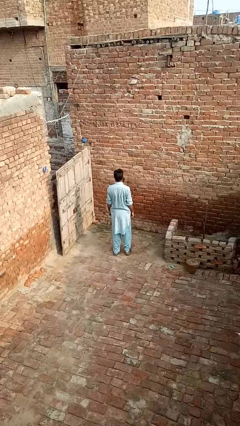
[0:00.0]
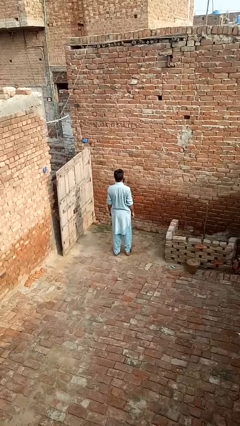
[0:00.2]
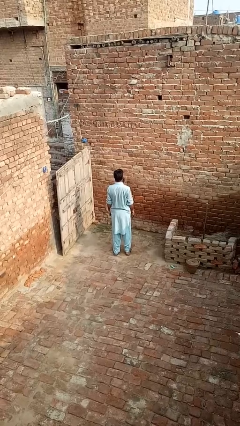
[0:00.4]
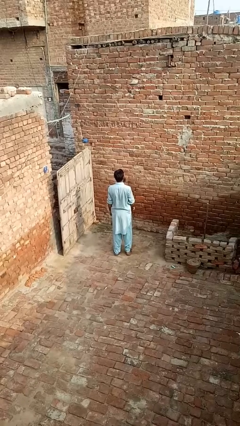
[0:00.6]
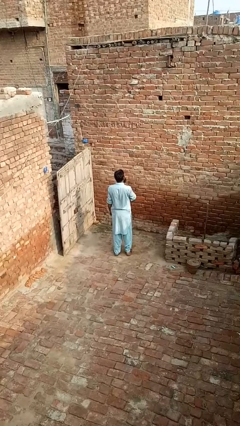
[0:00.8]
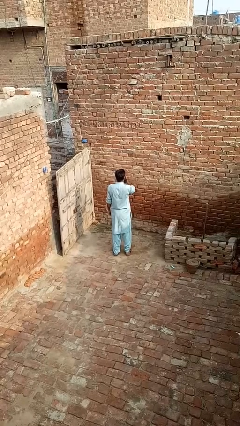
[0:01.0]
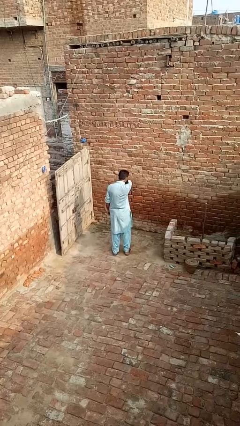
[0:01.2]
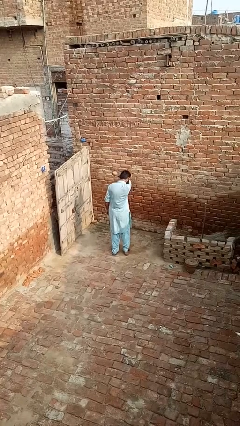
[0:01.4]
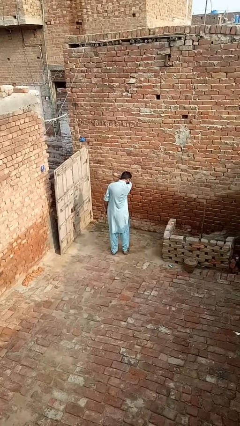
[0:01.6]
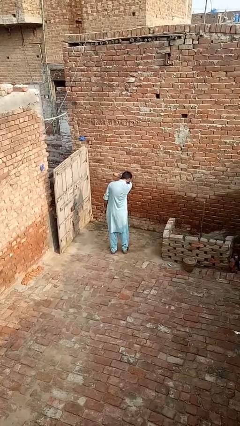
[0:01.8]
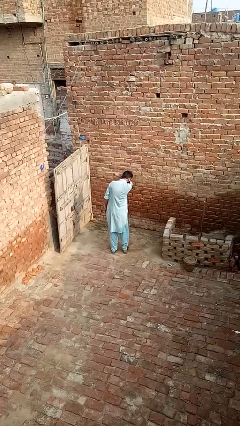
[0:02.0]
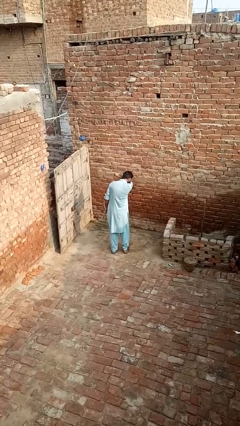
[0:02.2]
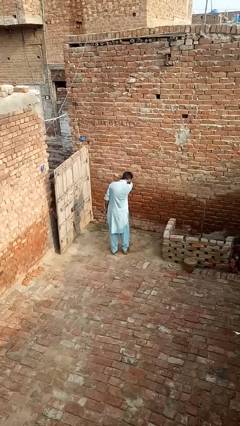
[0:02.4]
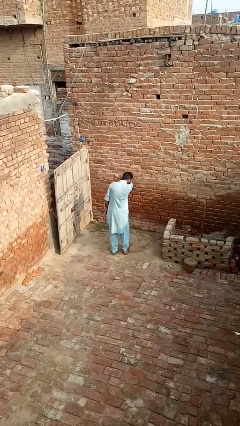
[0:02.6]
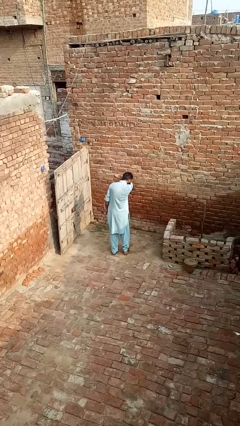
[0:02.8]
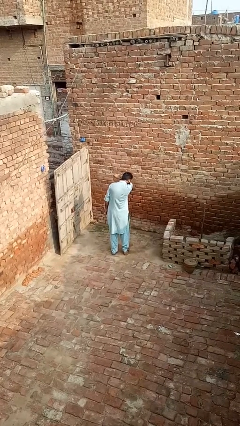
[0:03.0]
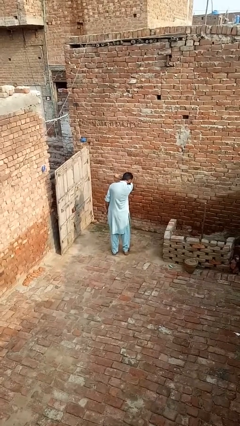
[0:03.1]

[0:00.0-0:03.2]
person sneezes into arm

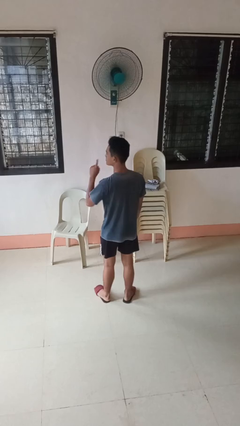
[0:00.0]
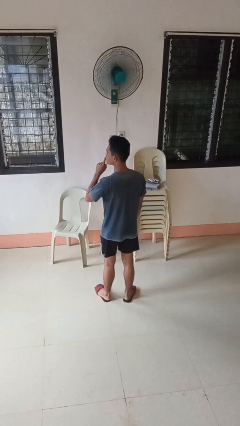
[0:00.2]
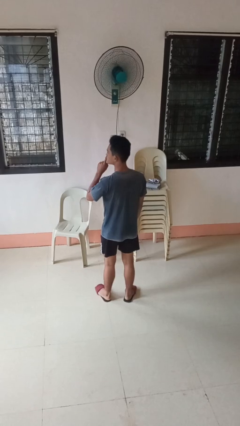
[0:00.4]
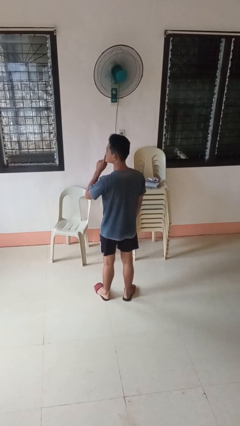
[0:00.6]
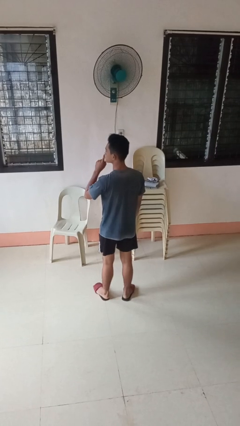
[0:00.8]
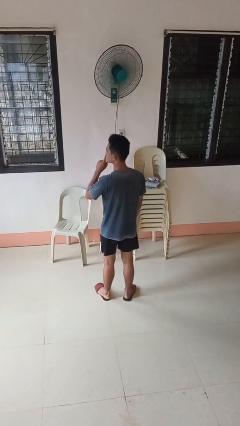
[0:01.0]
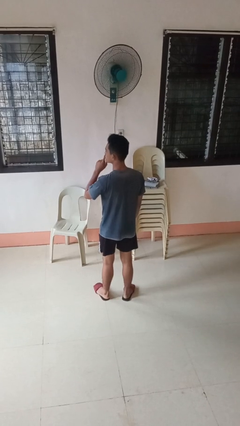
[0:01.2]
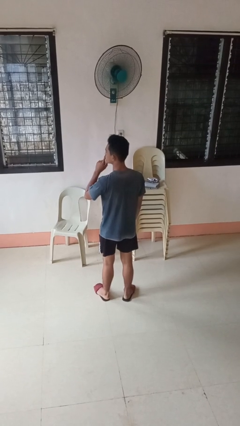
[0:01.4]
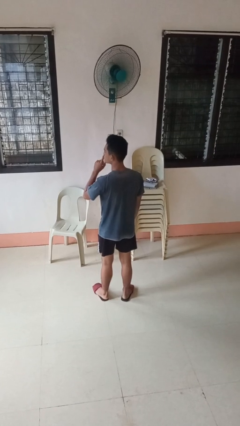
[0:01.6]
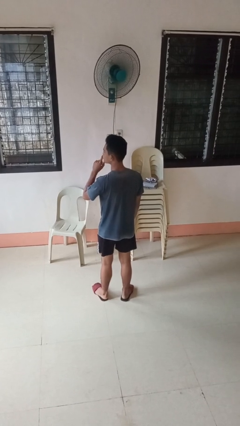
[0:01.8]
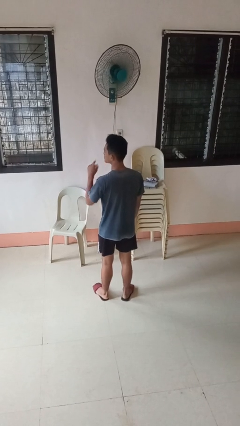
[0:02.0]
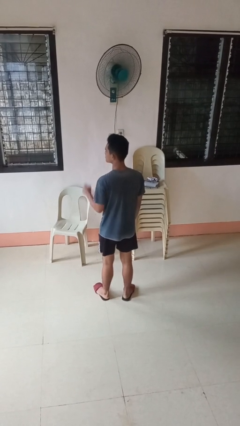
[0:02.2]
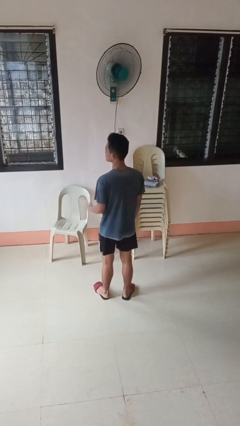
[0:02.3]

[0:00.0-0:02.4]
person gestures be quiet

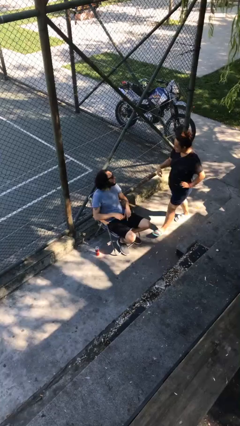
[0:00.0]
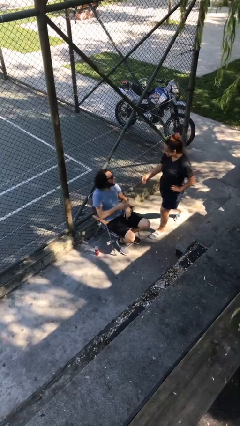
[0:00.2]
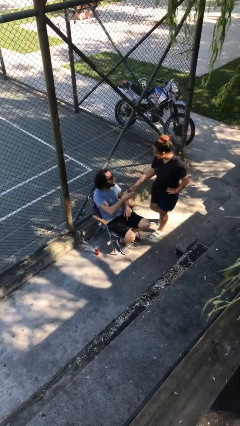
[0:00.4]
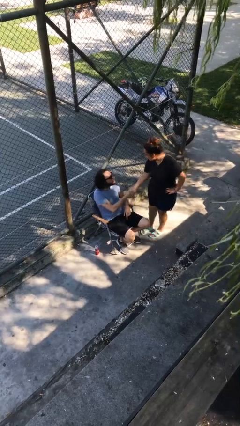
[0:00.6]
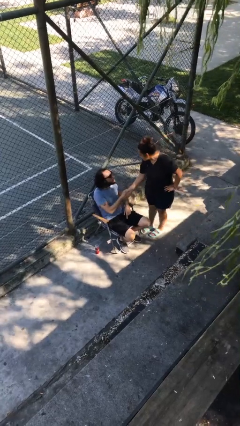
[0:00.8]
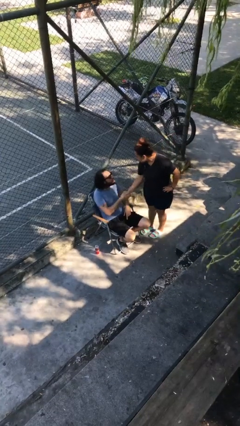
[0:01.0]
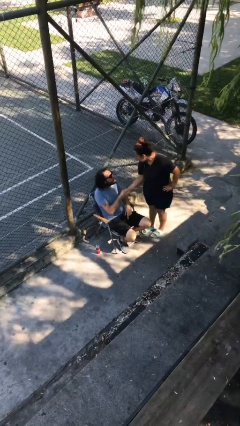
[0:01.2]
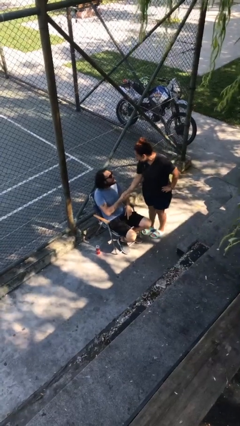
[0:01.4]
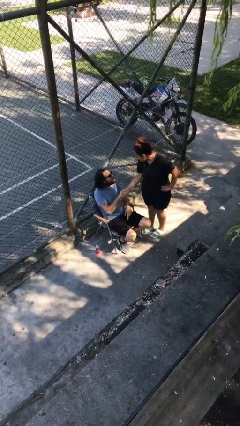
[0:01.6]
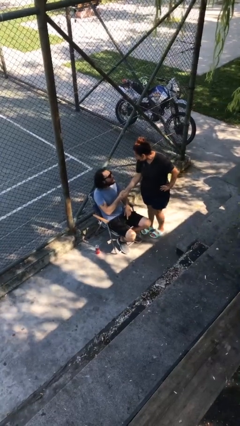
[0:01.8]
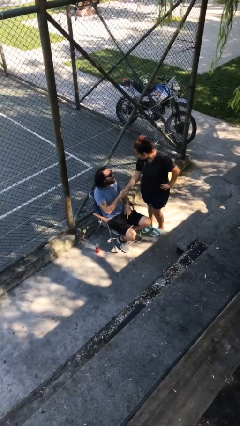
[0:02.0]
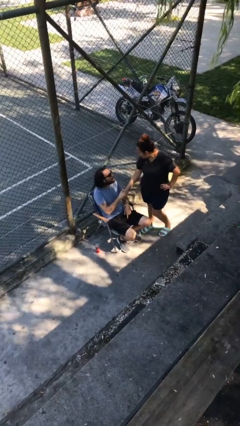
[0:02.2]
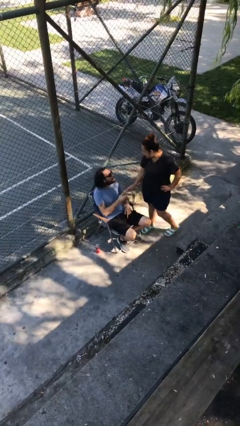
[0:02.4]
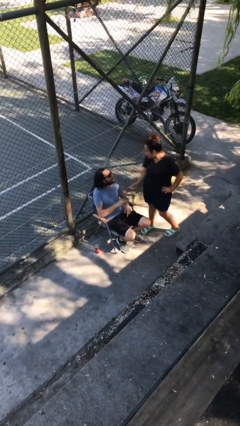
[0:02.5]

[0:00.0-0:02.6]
person shakes hand

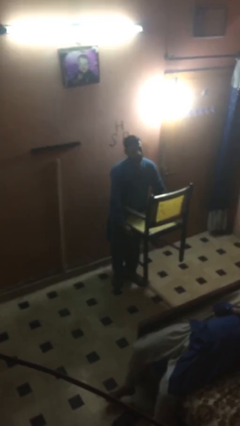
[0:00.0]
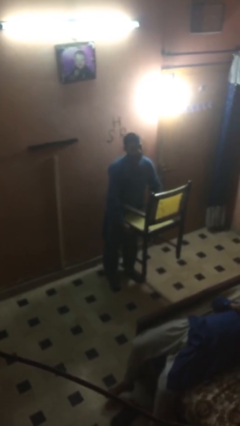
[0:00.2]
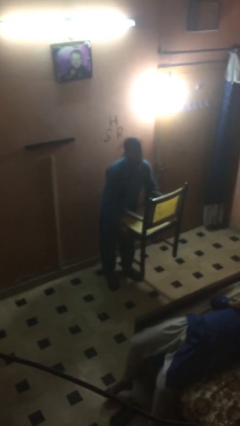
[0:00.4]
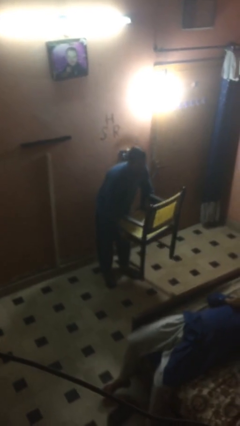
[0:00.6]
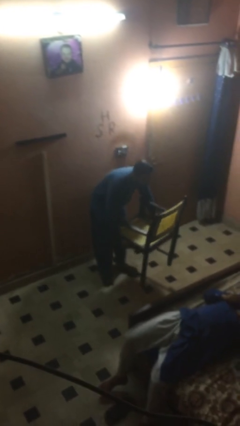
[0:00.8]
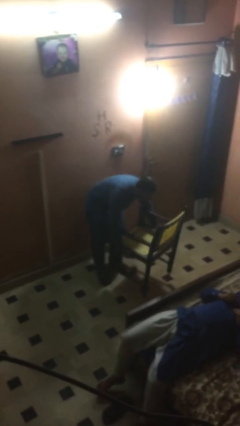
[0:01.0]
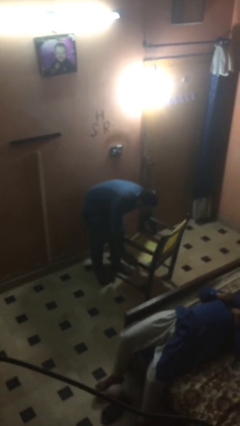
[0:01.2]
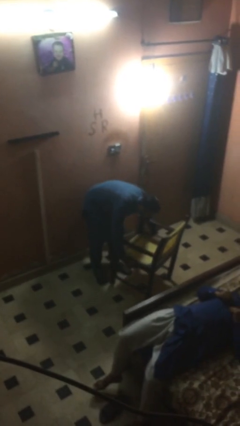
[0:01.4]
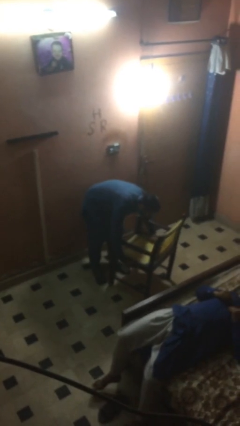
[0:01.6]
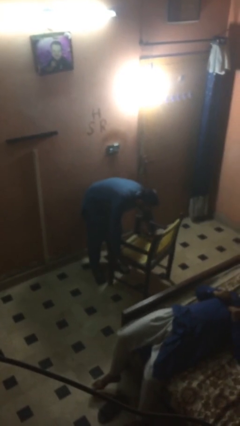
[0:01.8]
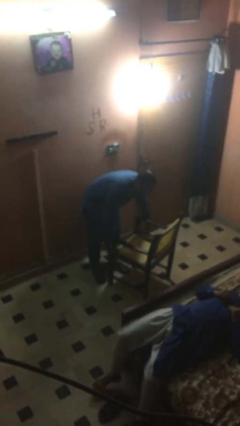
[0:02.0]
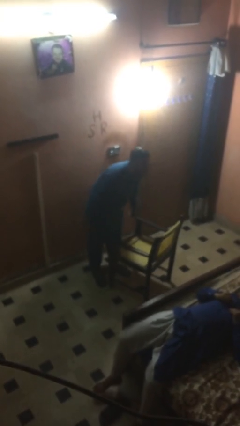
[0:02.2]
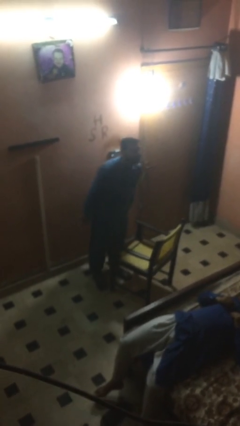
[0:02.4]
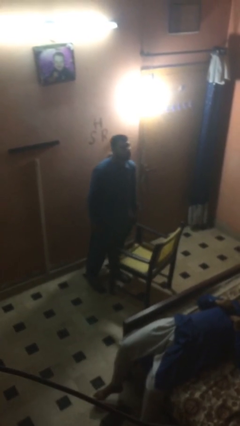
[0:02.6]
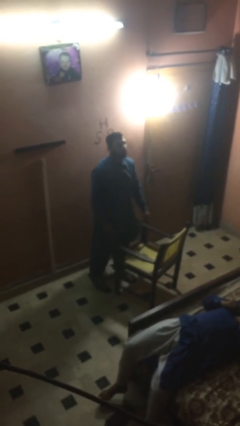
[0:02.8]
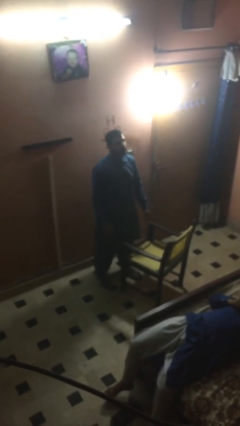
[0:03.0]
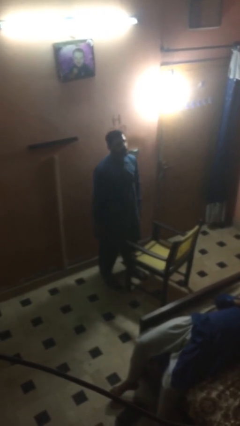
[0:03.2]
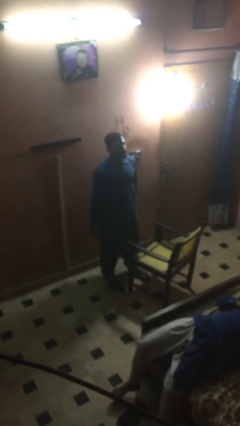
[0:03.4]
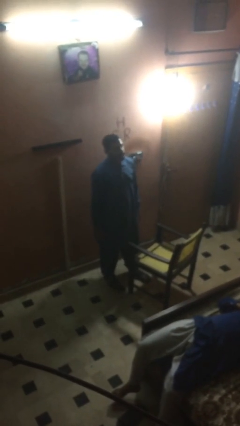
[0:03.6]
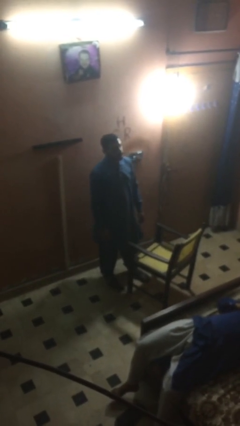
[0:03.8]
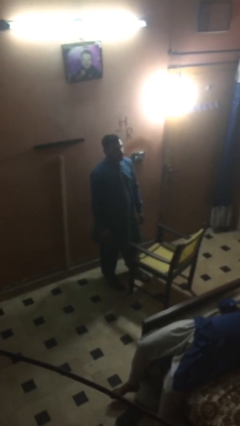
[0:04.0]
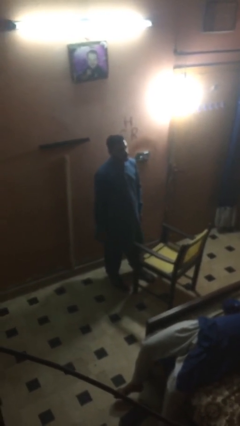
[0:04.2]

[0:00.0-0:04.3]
person puts down object on floor

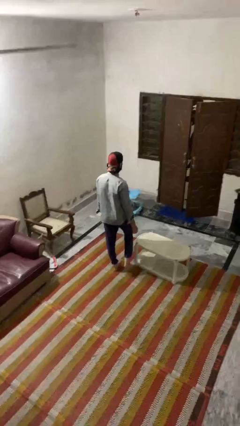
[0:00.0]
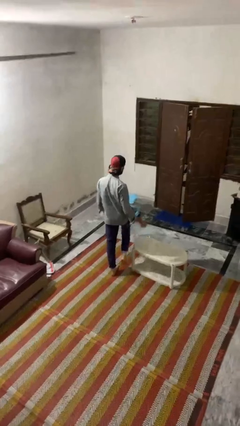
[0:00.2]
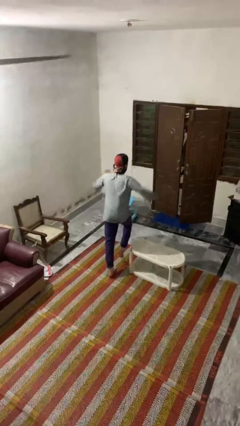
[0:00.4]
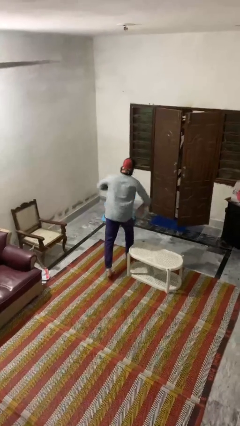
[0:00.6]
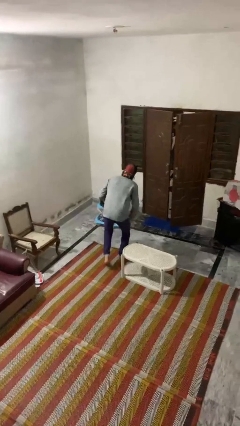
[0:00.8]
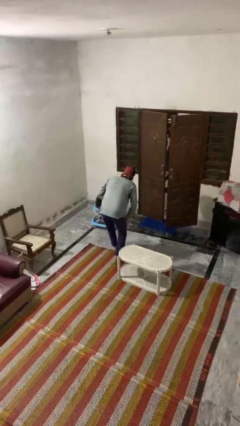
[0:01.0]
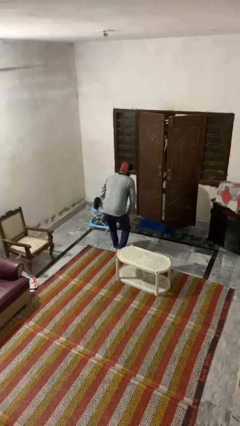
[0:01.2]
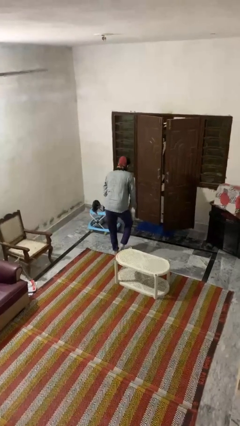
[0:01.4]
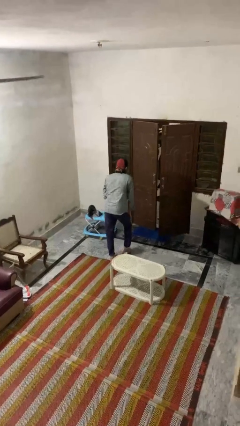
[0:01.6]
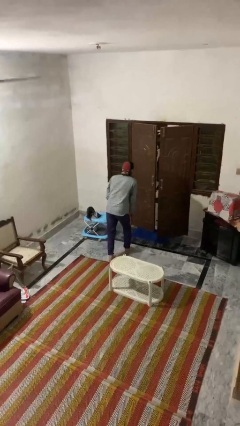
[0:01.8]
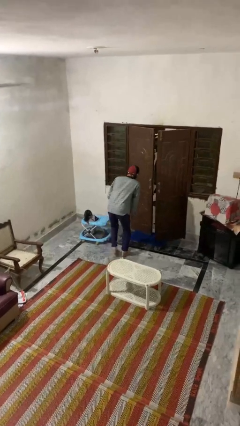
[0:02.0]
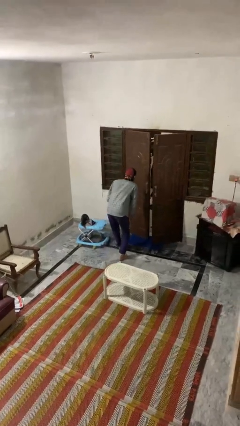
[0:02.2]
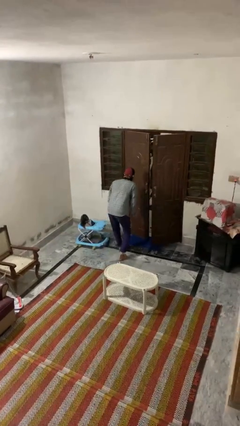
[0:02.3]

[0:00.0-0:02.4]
person bumps into table

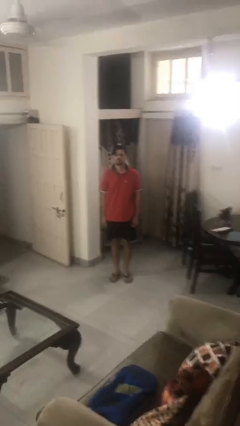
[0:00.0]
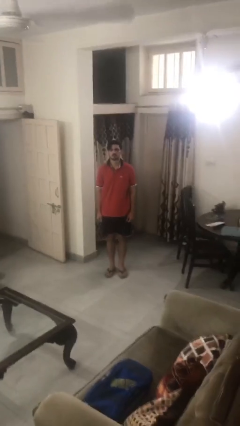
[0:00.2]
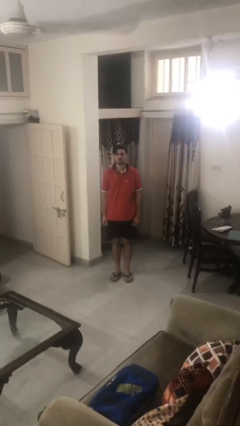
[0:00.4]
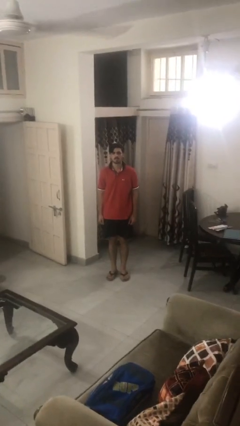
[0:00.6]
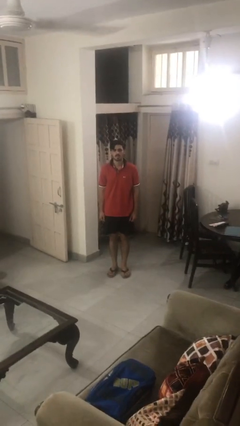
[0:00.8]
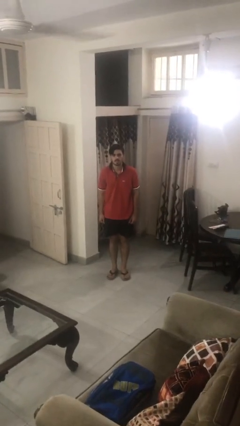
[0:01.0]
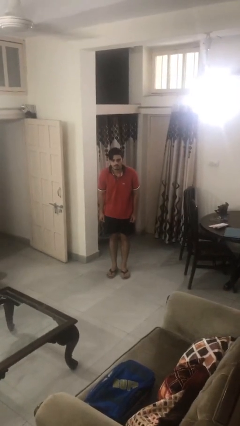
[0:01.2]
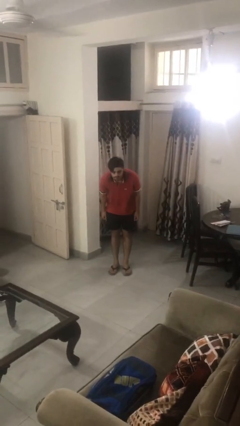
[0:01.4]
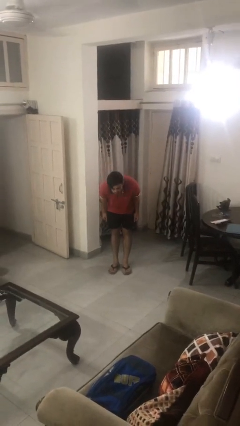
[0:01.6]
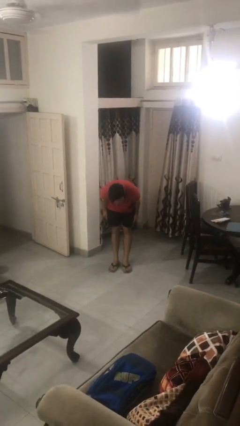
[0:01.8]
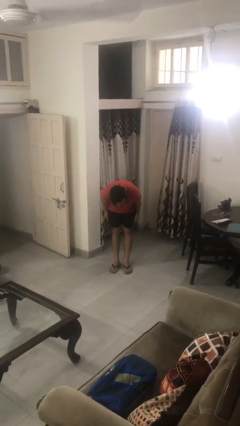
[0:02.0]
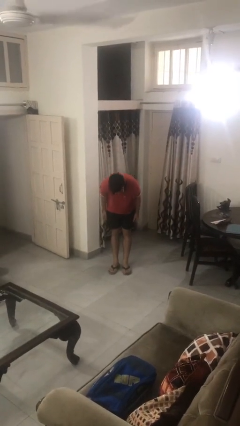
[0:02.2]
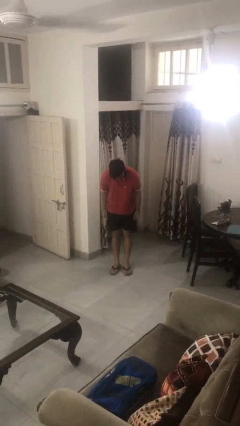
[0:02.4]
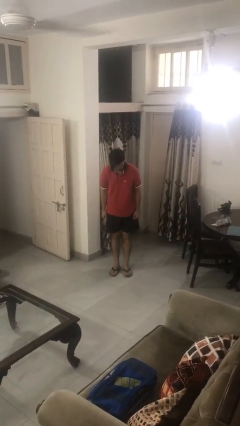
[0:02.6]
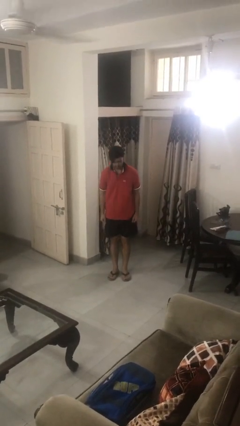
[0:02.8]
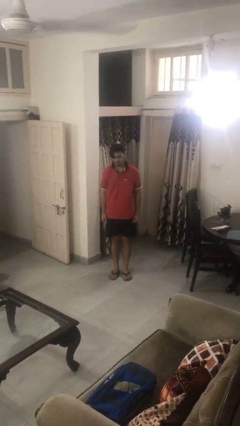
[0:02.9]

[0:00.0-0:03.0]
person bows
